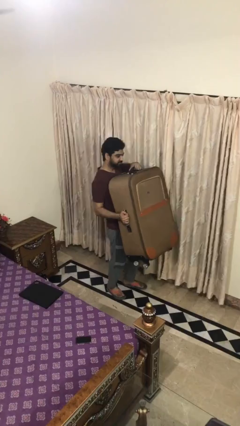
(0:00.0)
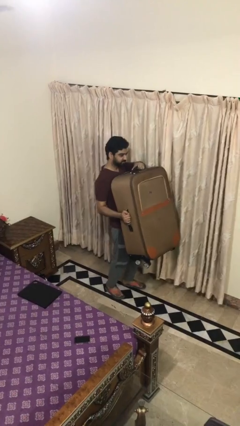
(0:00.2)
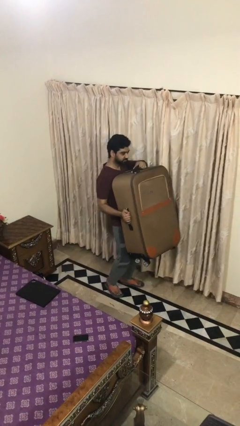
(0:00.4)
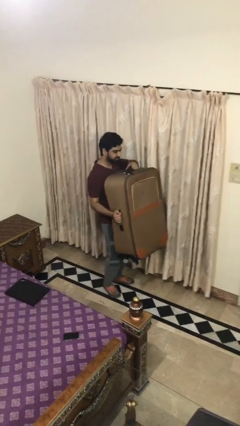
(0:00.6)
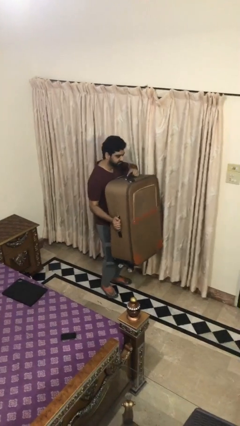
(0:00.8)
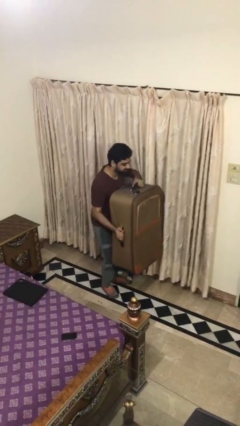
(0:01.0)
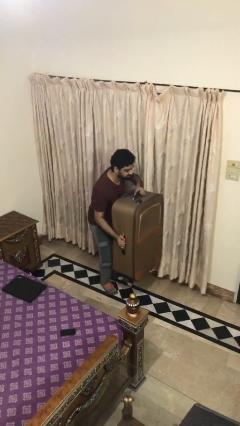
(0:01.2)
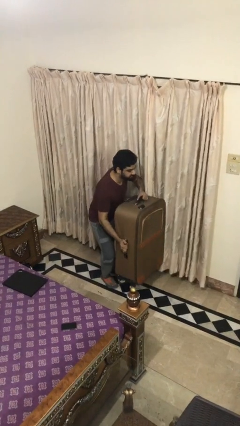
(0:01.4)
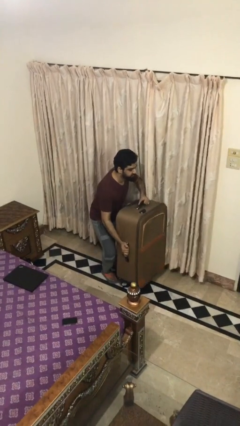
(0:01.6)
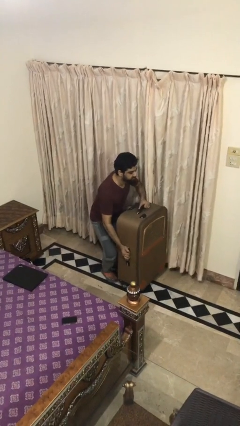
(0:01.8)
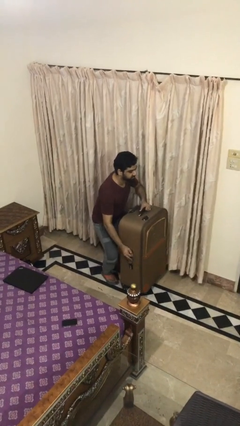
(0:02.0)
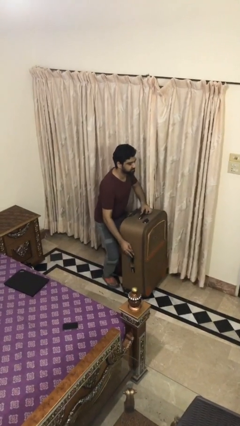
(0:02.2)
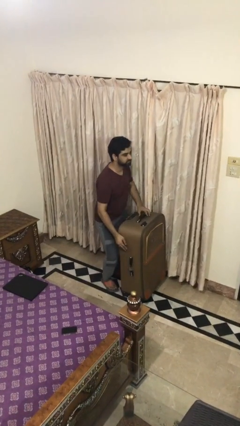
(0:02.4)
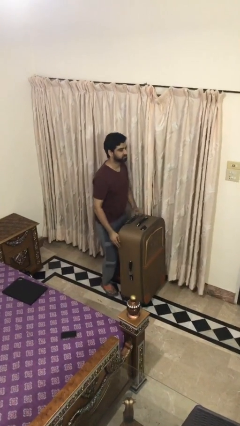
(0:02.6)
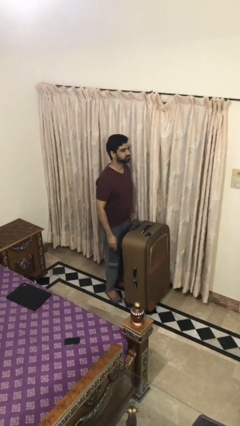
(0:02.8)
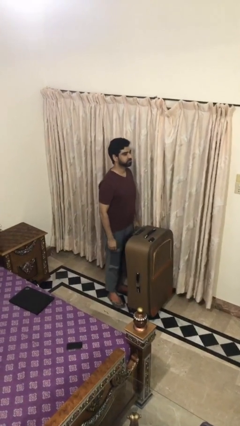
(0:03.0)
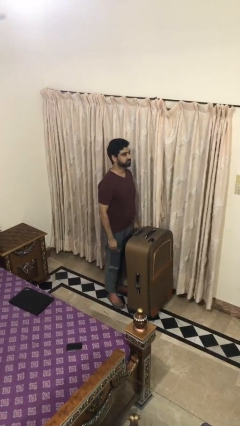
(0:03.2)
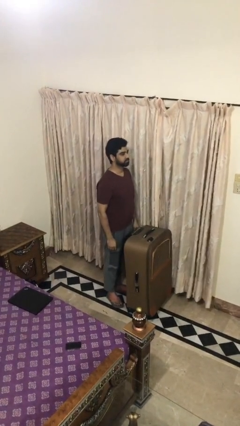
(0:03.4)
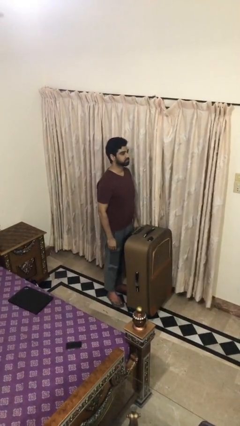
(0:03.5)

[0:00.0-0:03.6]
person puts down object on floor

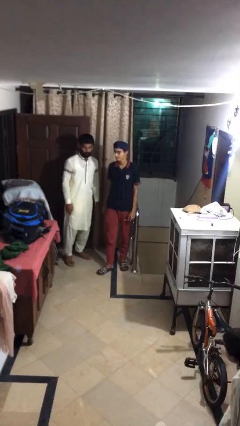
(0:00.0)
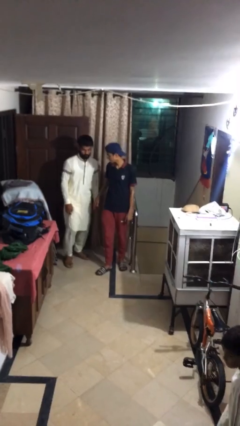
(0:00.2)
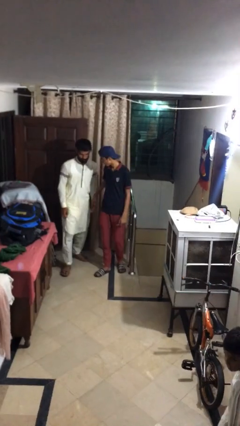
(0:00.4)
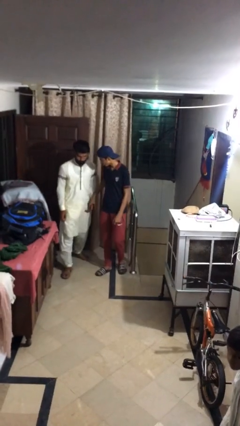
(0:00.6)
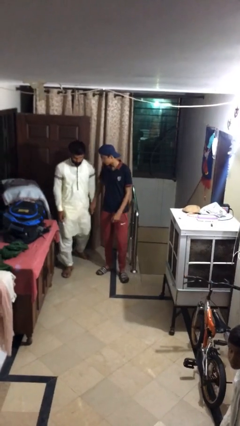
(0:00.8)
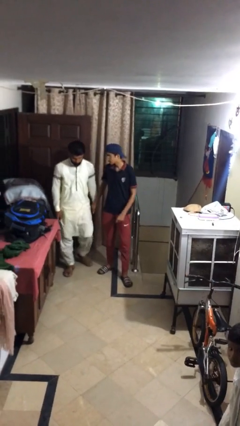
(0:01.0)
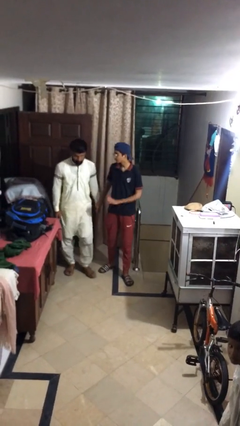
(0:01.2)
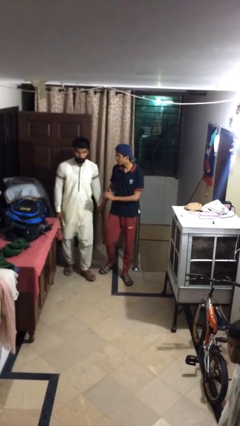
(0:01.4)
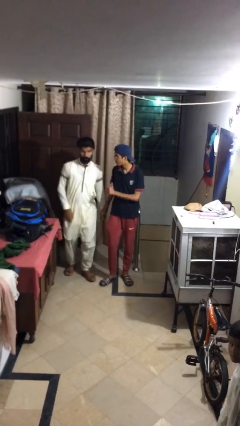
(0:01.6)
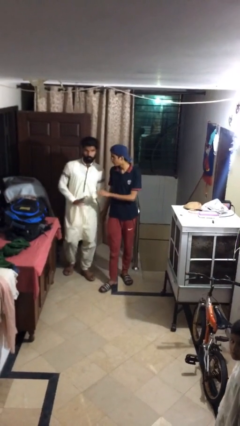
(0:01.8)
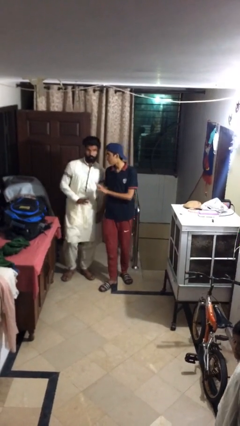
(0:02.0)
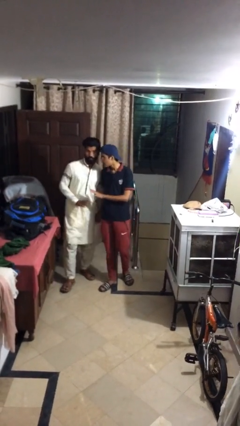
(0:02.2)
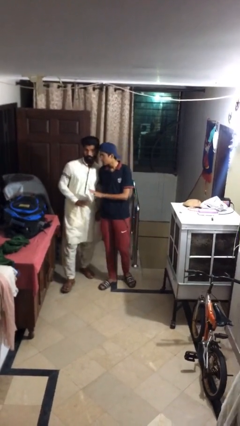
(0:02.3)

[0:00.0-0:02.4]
person holds hand

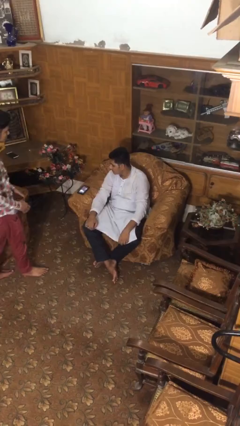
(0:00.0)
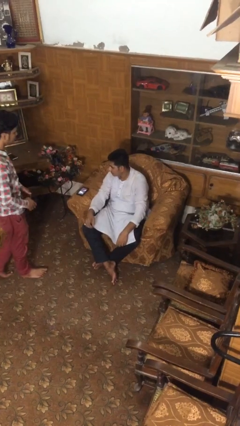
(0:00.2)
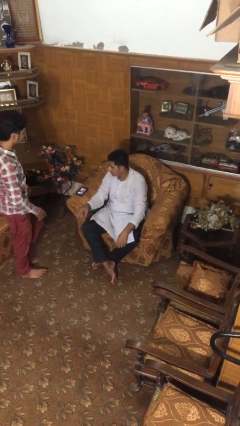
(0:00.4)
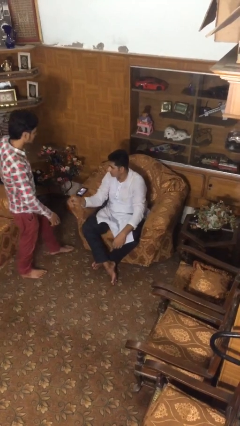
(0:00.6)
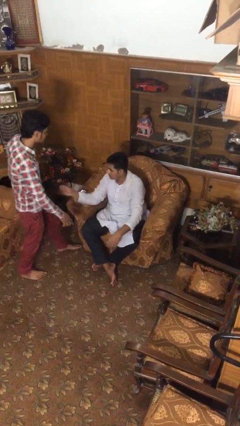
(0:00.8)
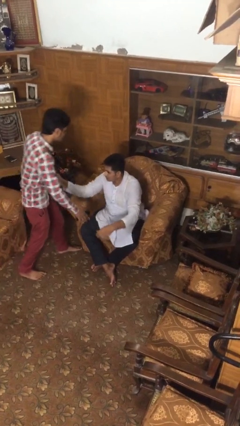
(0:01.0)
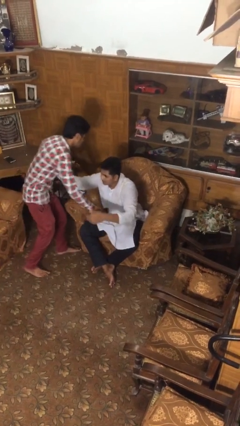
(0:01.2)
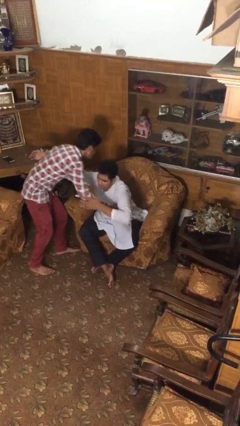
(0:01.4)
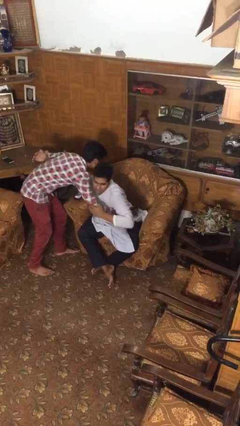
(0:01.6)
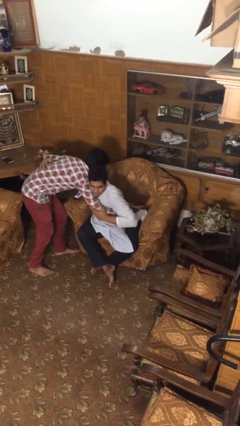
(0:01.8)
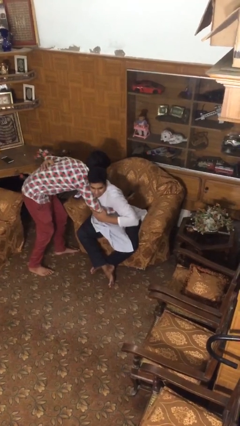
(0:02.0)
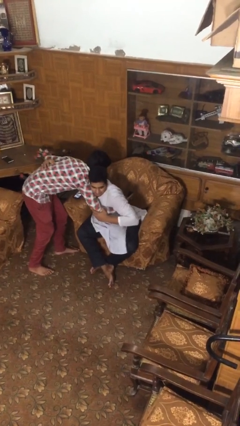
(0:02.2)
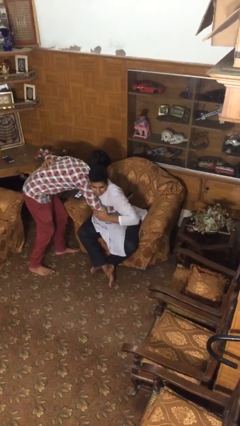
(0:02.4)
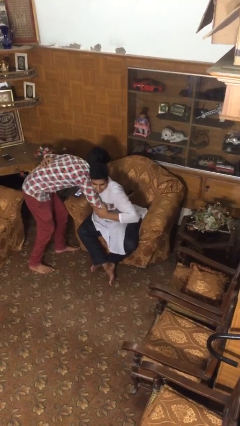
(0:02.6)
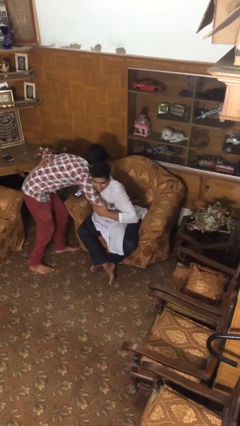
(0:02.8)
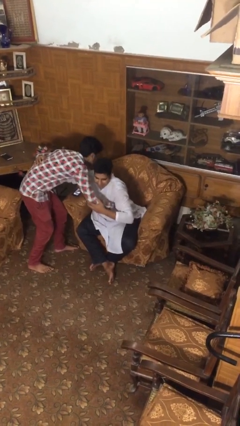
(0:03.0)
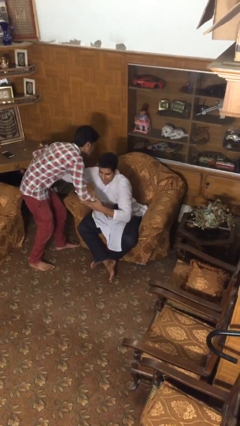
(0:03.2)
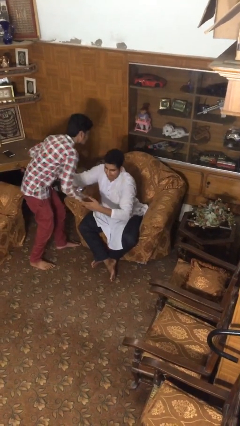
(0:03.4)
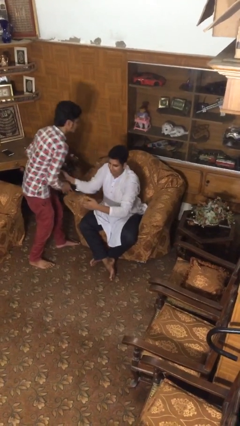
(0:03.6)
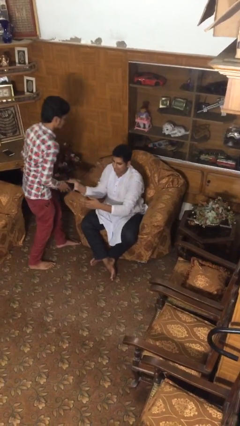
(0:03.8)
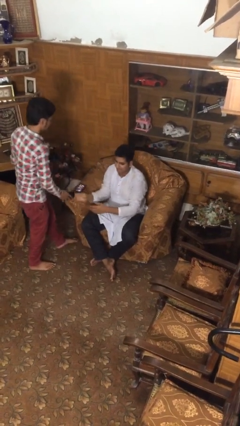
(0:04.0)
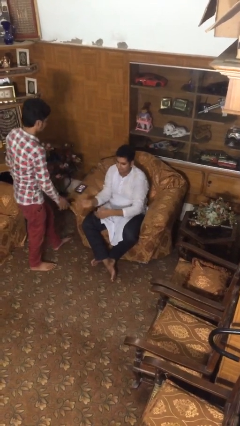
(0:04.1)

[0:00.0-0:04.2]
person embraces person

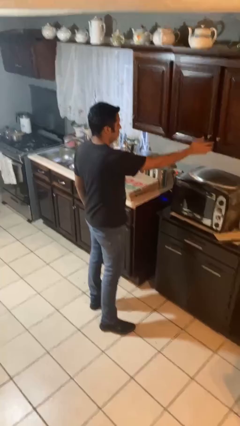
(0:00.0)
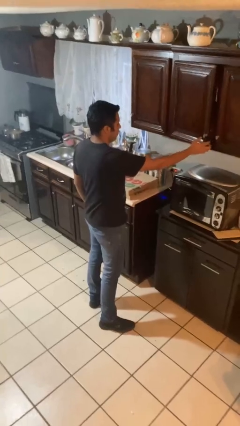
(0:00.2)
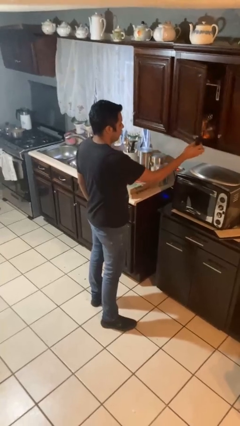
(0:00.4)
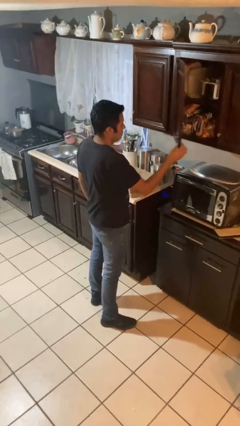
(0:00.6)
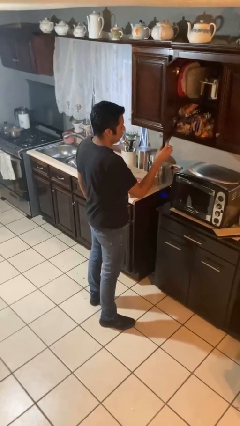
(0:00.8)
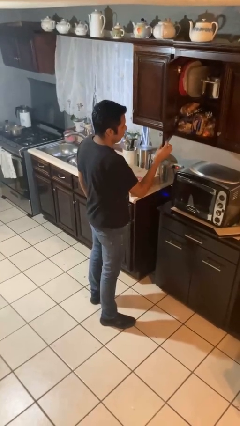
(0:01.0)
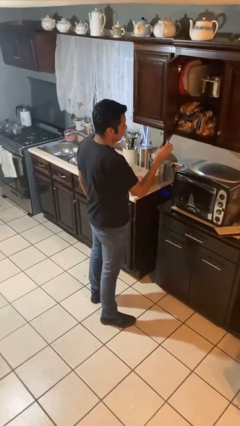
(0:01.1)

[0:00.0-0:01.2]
person opens cabinet

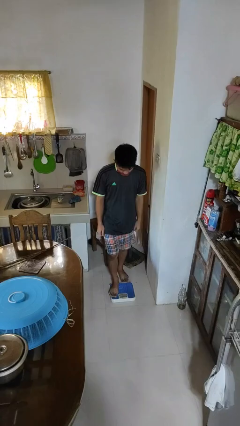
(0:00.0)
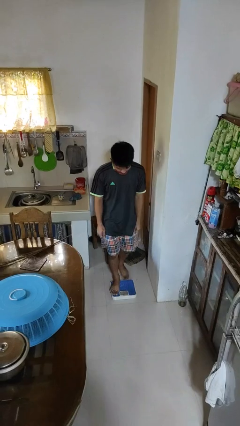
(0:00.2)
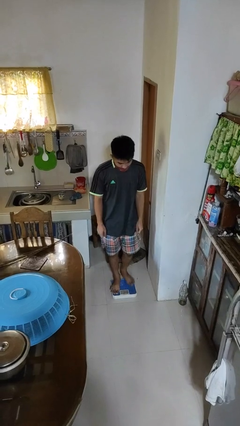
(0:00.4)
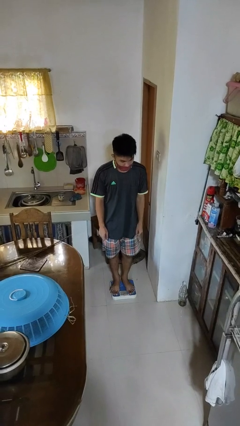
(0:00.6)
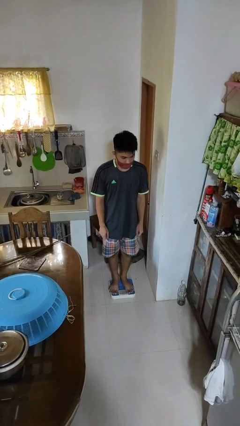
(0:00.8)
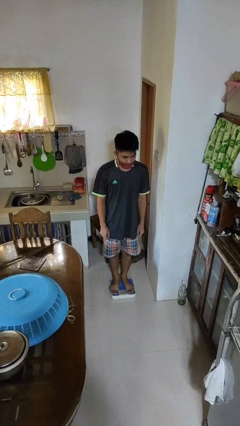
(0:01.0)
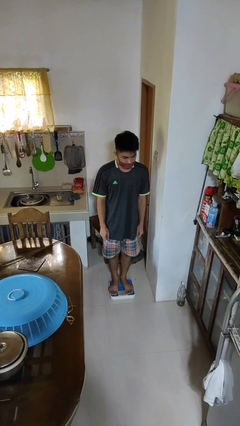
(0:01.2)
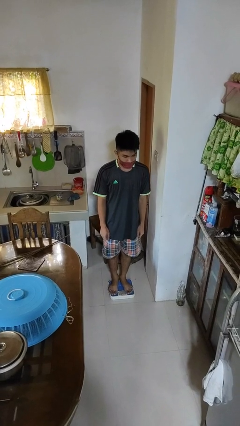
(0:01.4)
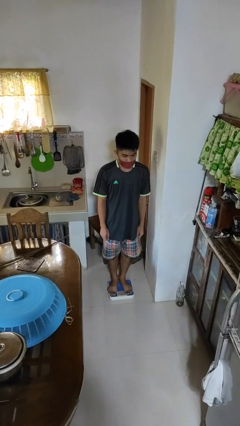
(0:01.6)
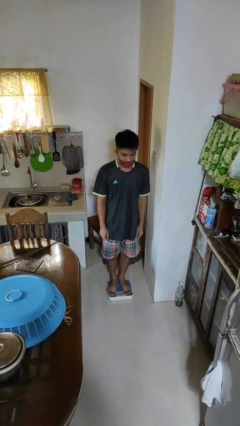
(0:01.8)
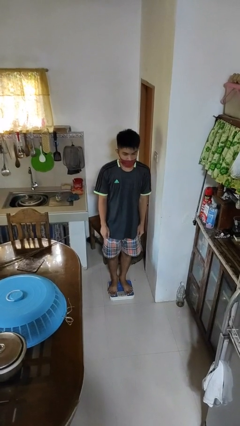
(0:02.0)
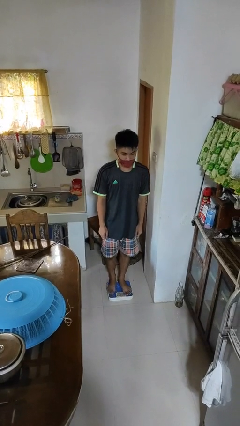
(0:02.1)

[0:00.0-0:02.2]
person uses bodyweight scale

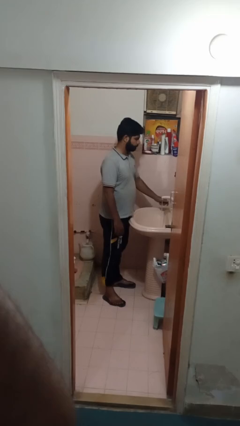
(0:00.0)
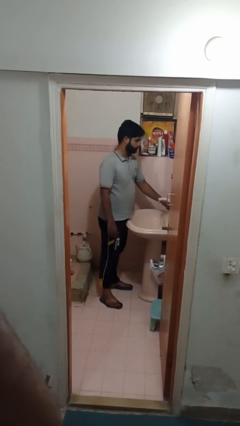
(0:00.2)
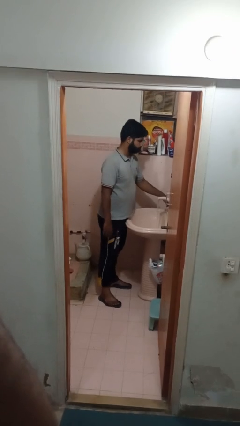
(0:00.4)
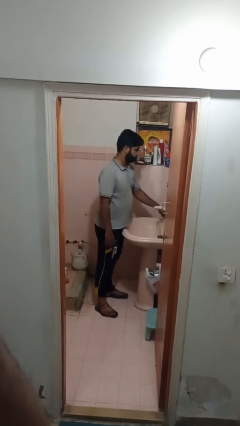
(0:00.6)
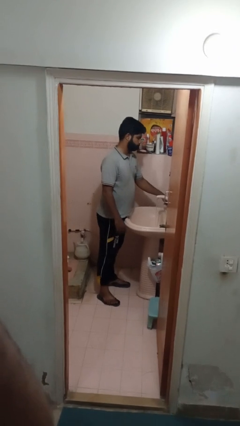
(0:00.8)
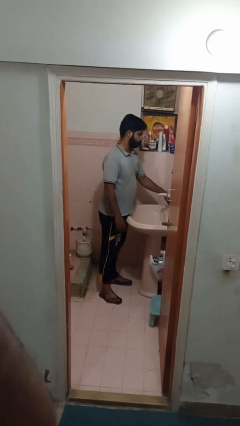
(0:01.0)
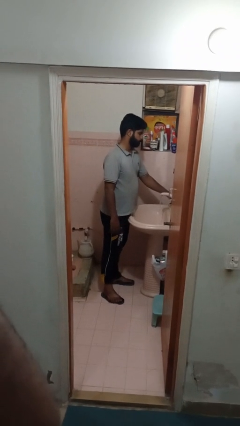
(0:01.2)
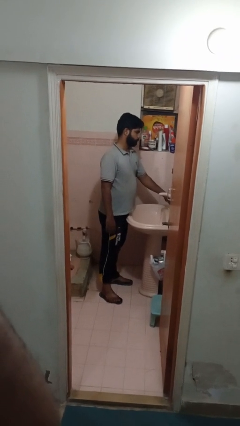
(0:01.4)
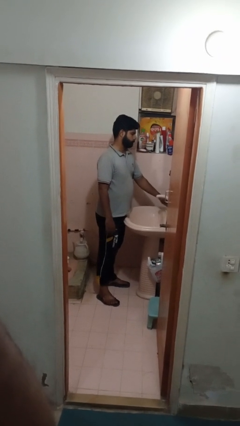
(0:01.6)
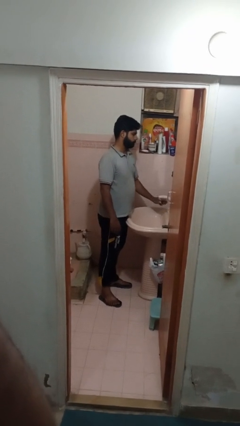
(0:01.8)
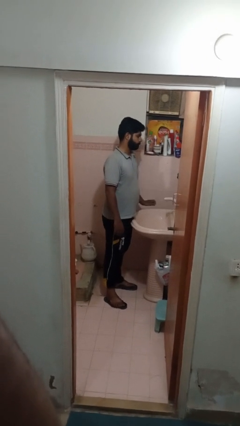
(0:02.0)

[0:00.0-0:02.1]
person turns off faucet

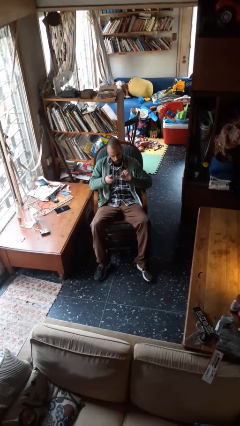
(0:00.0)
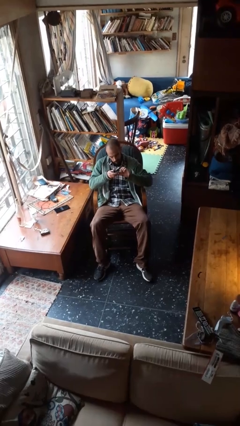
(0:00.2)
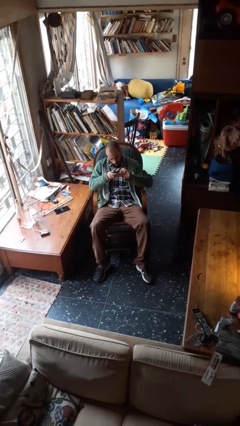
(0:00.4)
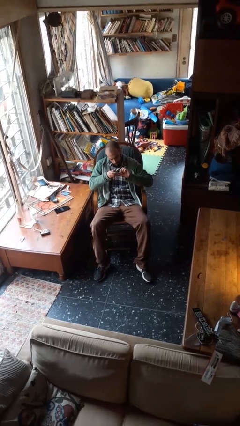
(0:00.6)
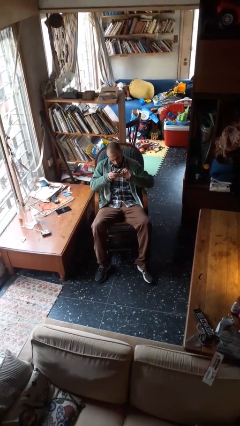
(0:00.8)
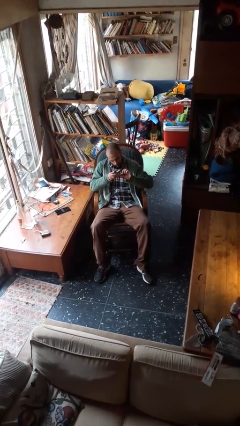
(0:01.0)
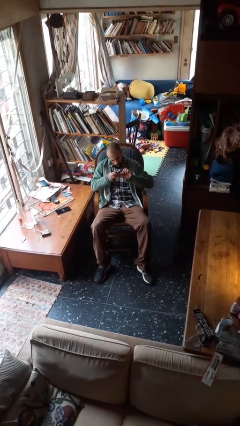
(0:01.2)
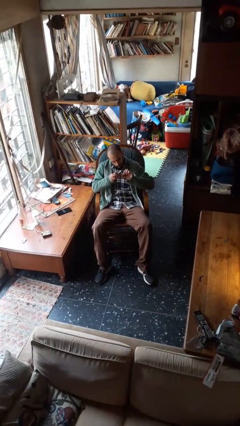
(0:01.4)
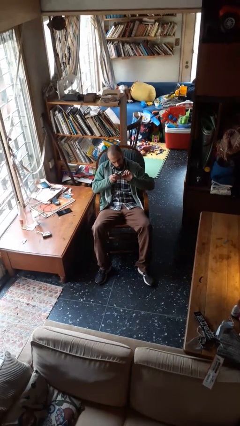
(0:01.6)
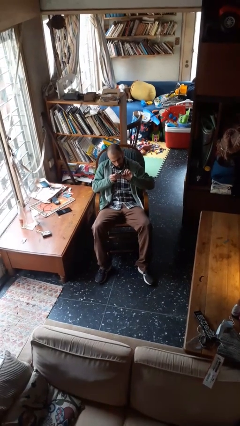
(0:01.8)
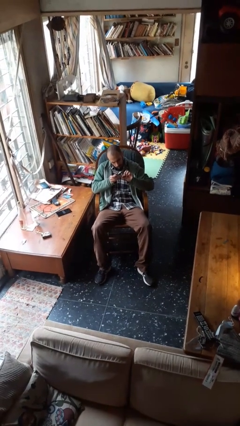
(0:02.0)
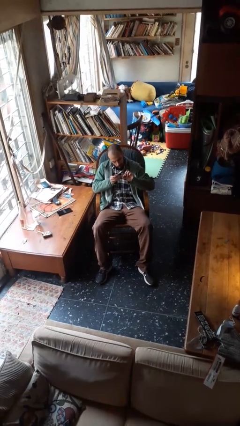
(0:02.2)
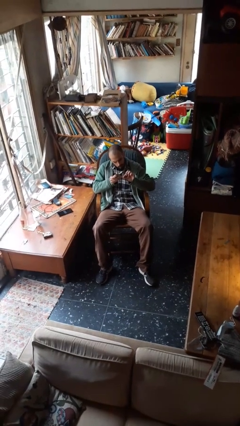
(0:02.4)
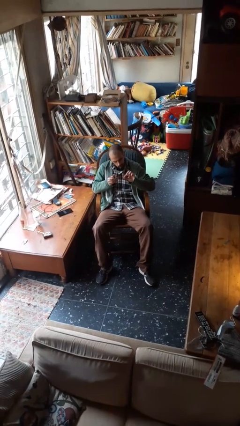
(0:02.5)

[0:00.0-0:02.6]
person clips fingernails
